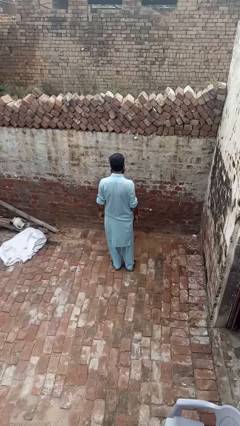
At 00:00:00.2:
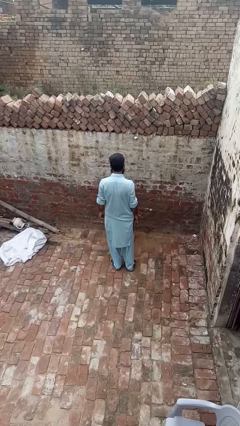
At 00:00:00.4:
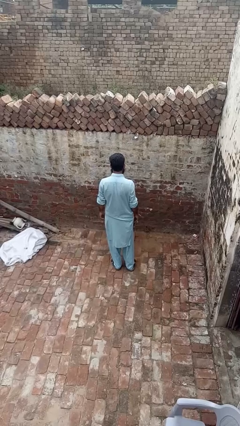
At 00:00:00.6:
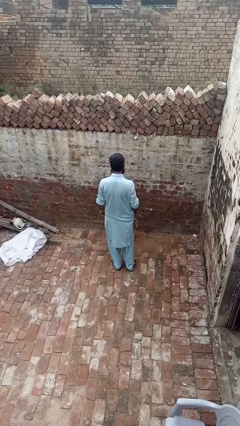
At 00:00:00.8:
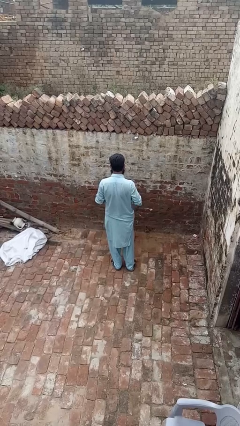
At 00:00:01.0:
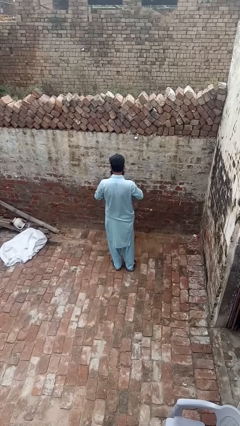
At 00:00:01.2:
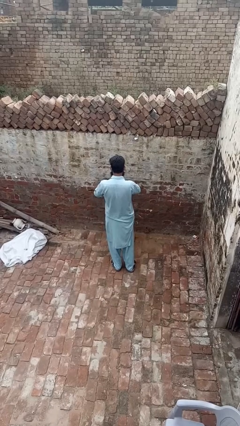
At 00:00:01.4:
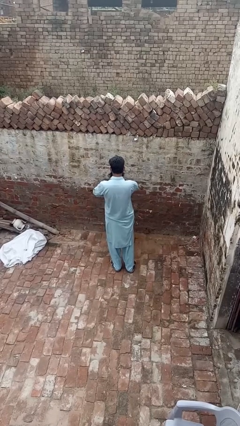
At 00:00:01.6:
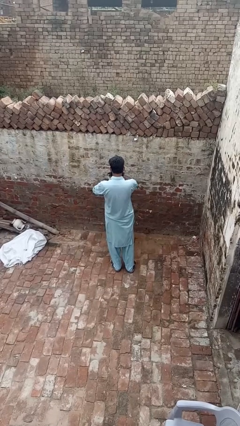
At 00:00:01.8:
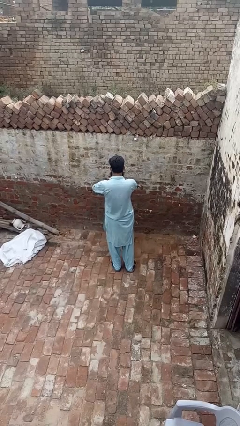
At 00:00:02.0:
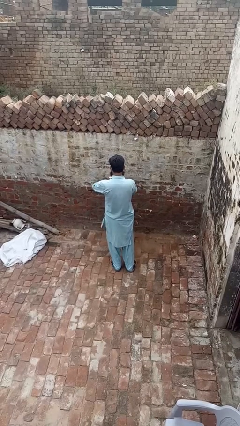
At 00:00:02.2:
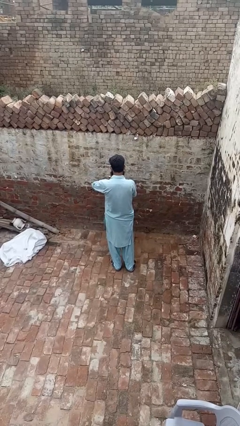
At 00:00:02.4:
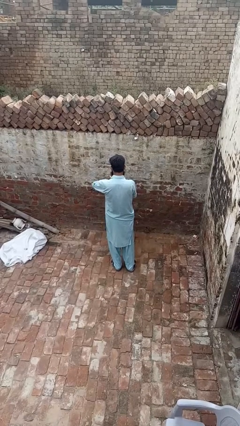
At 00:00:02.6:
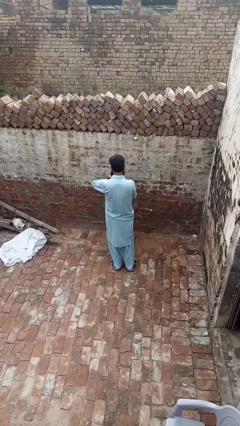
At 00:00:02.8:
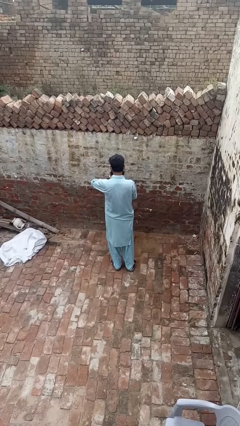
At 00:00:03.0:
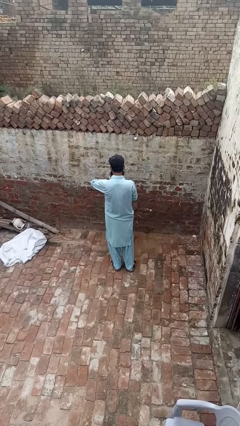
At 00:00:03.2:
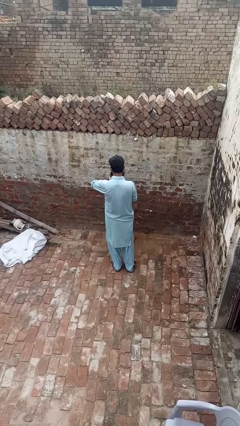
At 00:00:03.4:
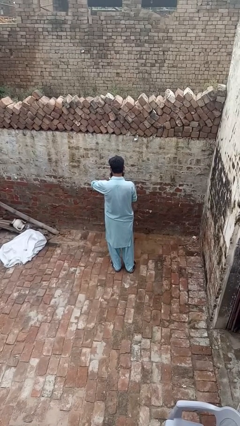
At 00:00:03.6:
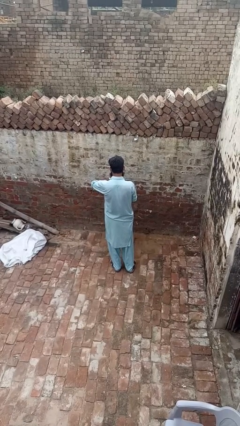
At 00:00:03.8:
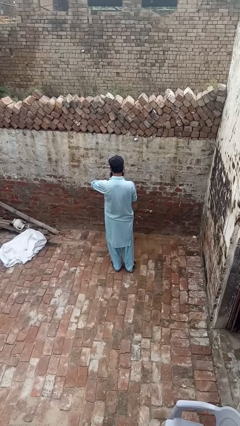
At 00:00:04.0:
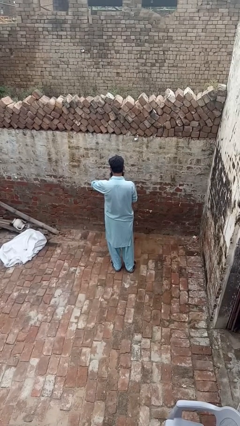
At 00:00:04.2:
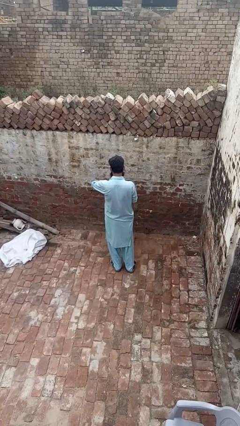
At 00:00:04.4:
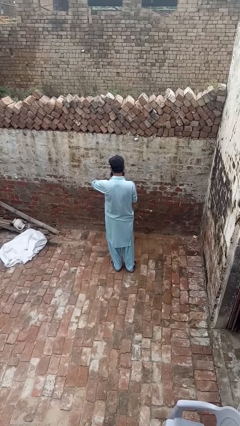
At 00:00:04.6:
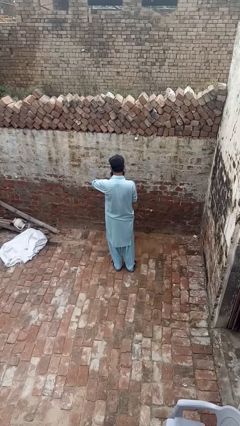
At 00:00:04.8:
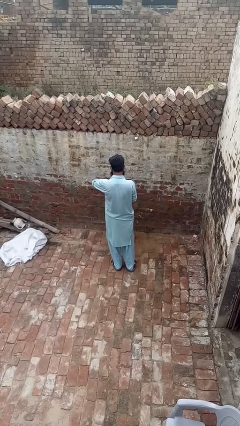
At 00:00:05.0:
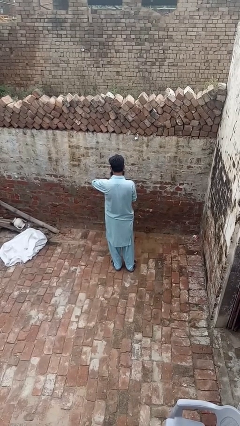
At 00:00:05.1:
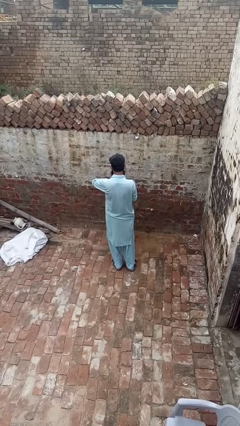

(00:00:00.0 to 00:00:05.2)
person puts on wristwatch

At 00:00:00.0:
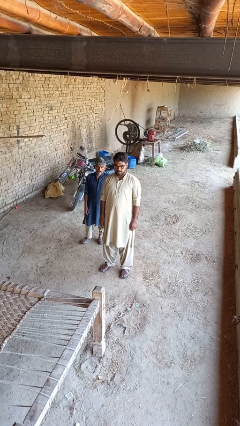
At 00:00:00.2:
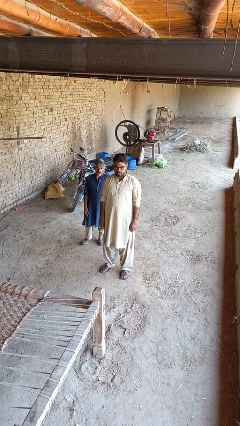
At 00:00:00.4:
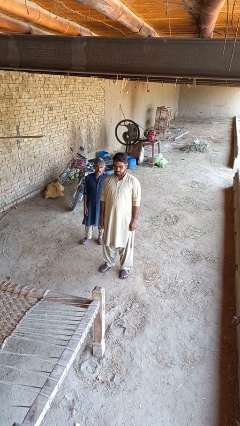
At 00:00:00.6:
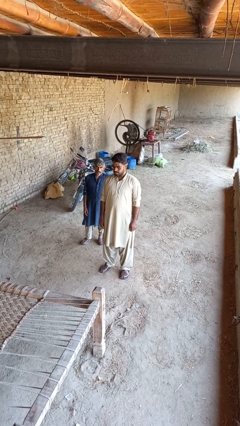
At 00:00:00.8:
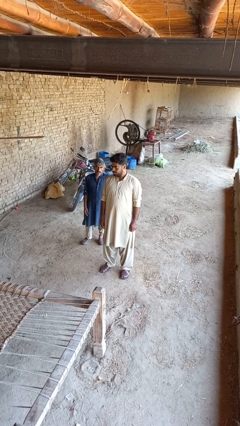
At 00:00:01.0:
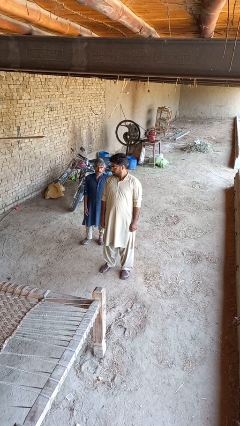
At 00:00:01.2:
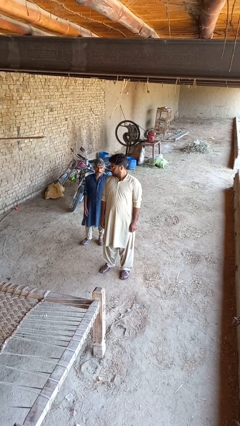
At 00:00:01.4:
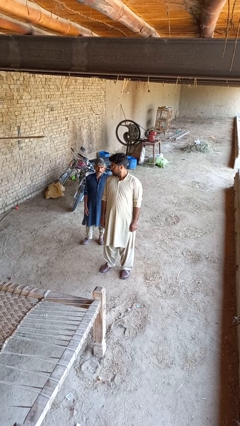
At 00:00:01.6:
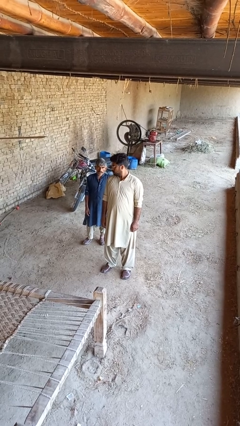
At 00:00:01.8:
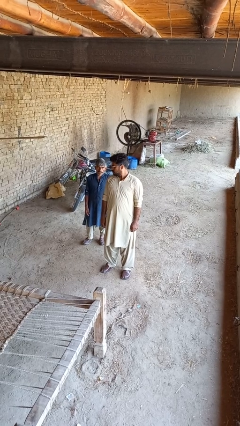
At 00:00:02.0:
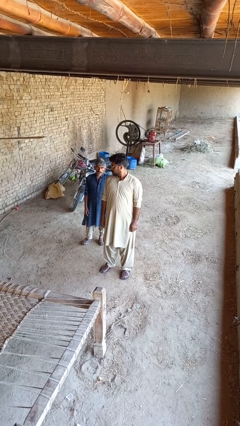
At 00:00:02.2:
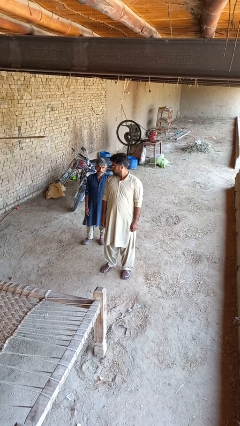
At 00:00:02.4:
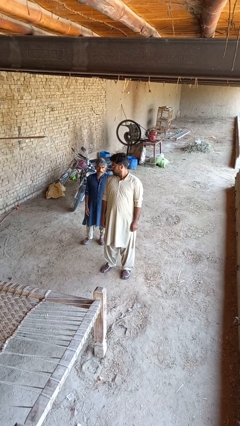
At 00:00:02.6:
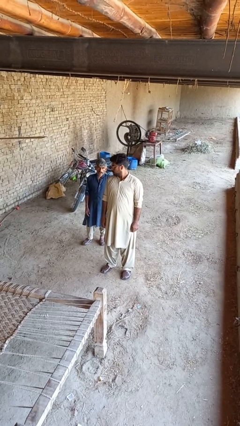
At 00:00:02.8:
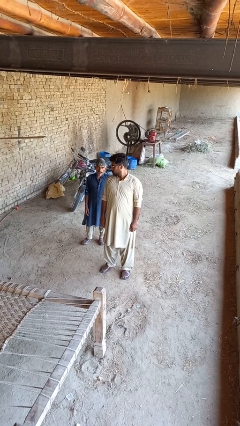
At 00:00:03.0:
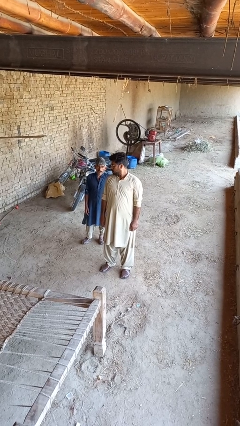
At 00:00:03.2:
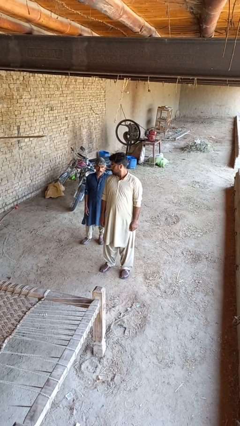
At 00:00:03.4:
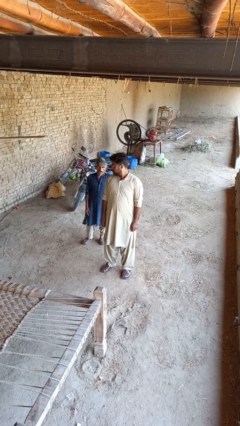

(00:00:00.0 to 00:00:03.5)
person looks over shoulder

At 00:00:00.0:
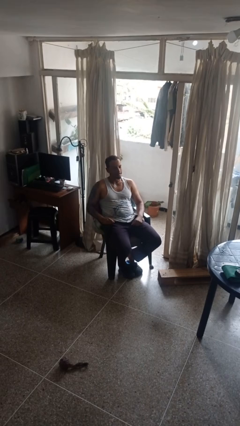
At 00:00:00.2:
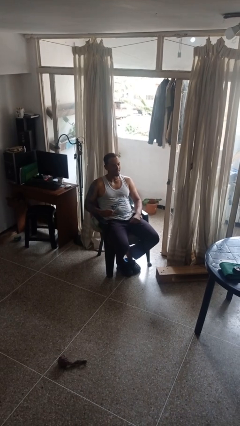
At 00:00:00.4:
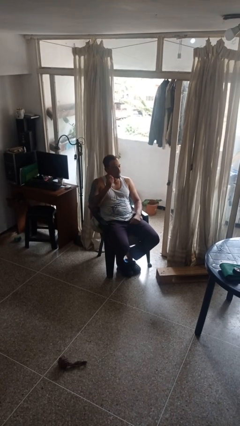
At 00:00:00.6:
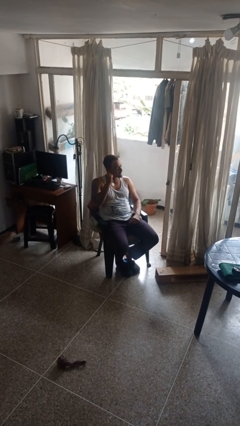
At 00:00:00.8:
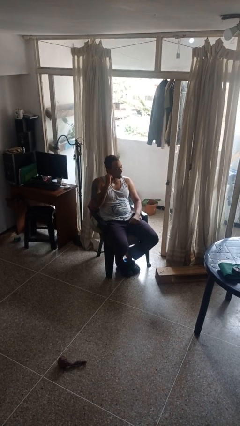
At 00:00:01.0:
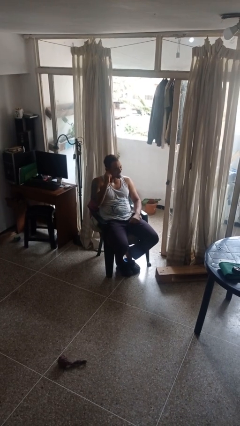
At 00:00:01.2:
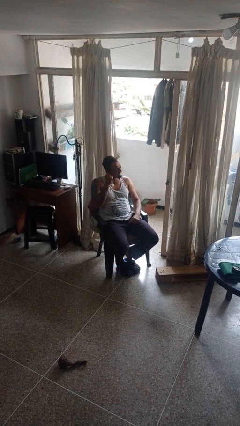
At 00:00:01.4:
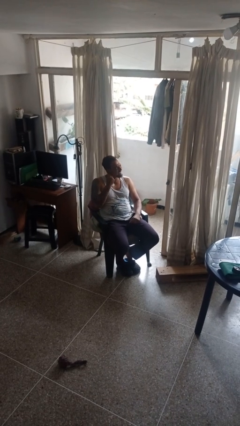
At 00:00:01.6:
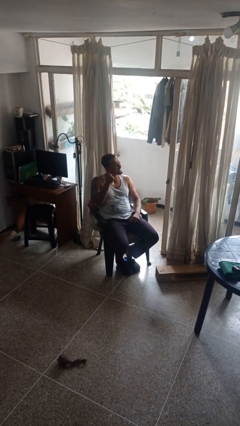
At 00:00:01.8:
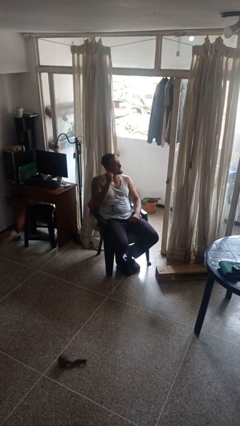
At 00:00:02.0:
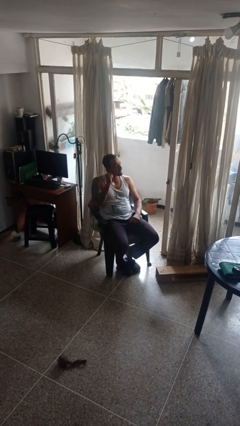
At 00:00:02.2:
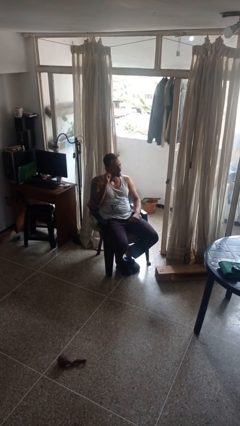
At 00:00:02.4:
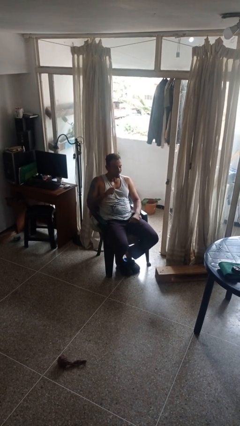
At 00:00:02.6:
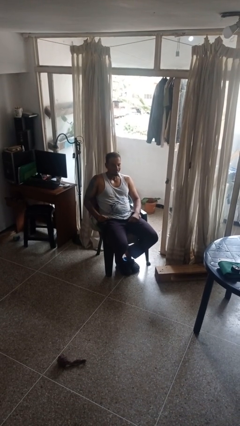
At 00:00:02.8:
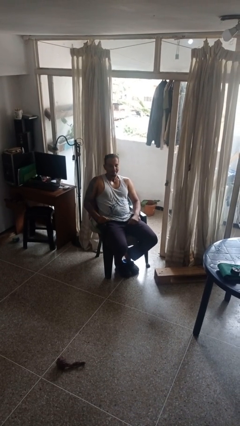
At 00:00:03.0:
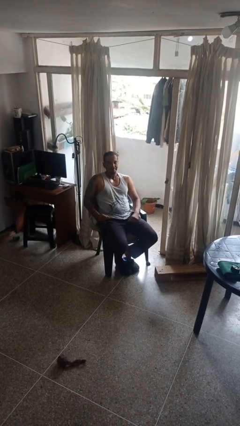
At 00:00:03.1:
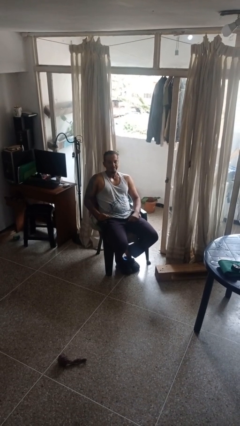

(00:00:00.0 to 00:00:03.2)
person touches earlobe

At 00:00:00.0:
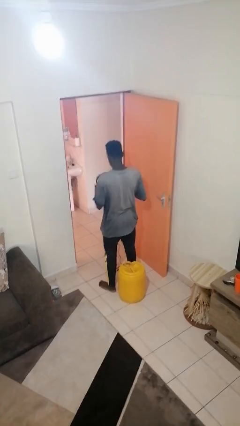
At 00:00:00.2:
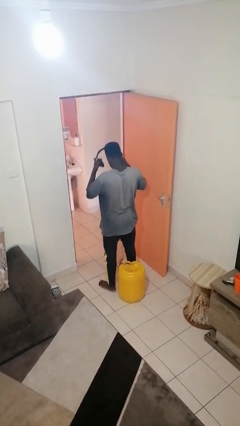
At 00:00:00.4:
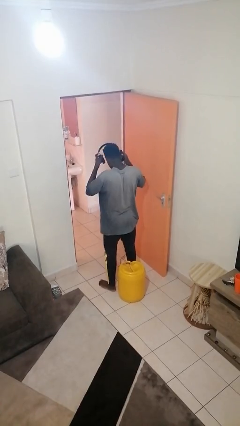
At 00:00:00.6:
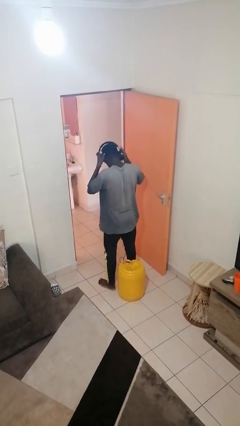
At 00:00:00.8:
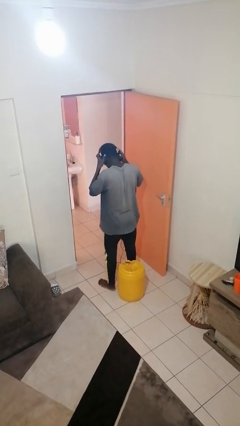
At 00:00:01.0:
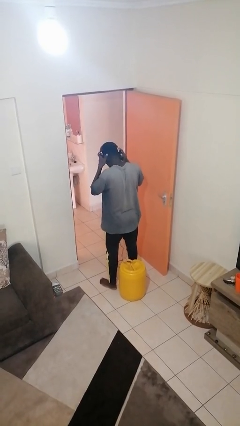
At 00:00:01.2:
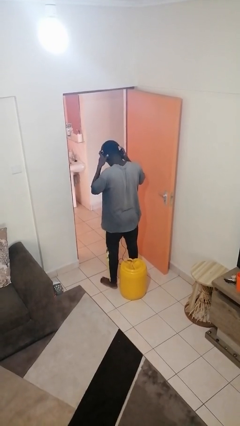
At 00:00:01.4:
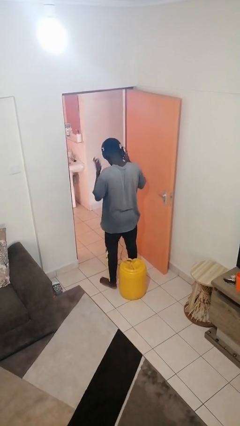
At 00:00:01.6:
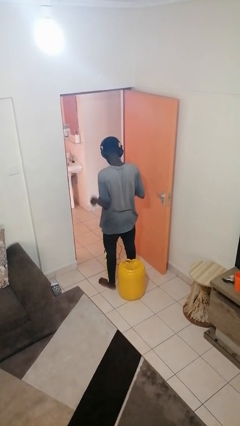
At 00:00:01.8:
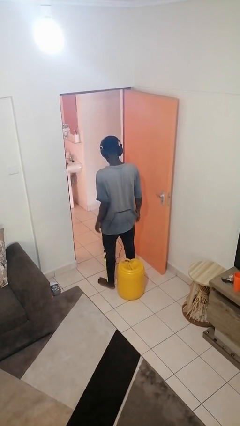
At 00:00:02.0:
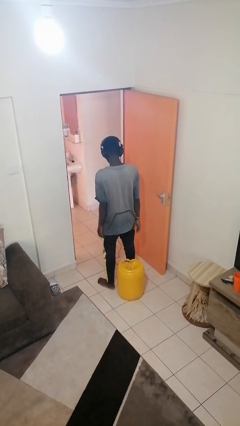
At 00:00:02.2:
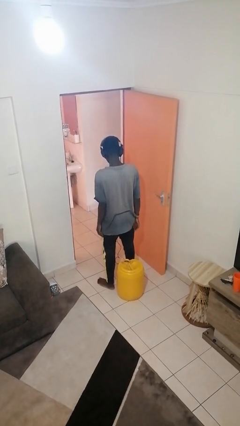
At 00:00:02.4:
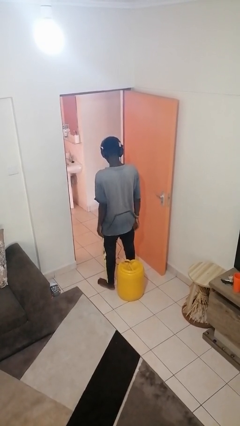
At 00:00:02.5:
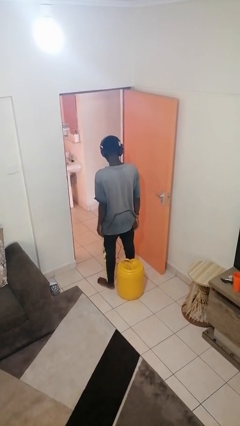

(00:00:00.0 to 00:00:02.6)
person puts on headphones

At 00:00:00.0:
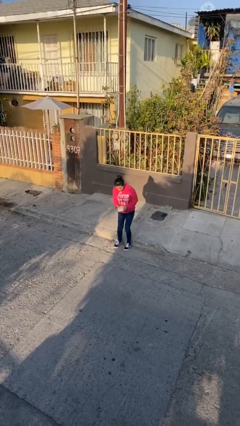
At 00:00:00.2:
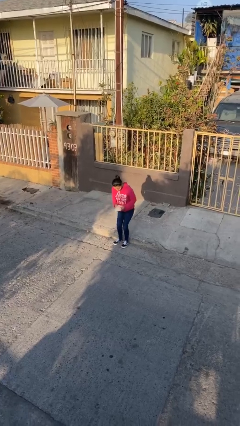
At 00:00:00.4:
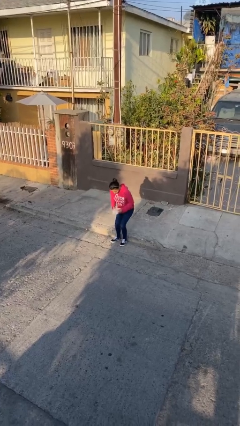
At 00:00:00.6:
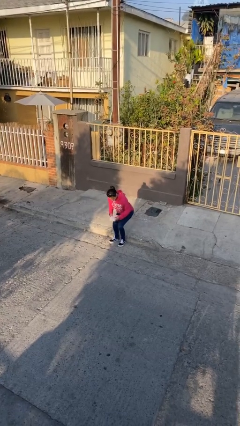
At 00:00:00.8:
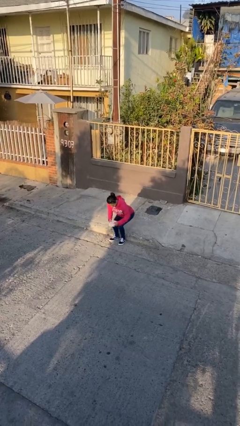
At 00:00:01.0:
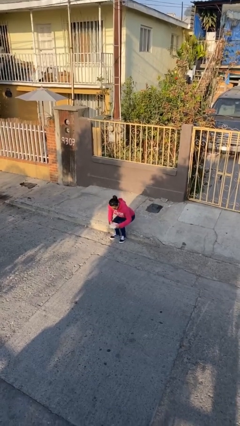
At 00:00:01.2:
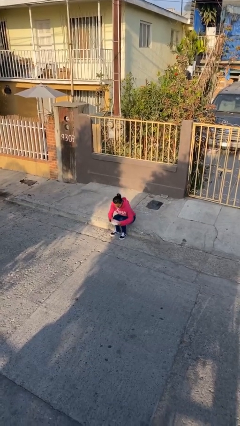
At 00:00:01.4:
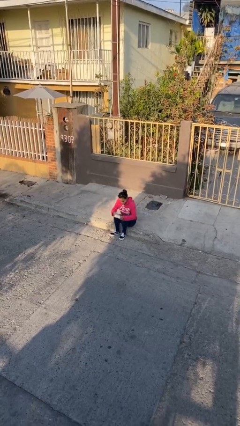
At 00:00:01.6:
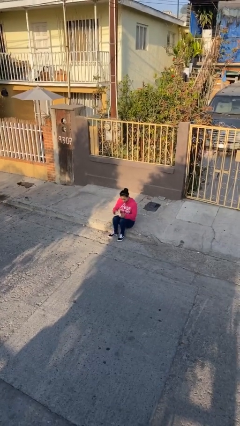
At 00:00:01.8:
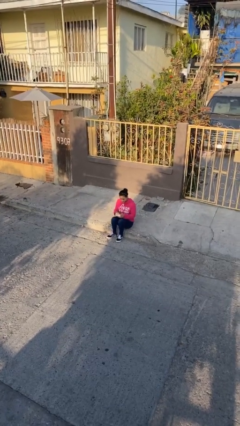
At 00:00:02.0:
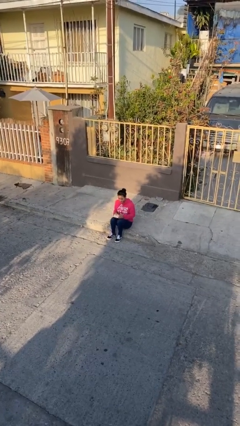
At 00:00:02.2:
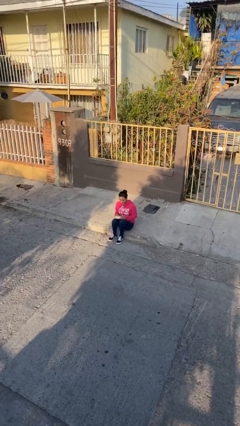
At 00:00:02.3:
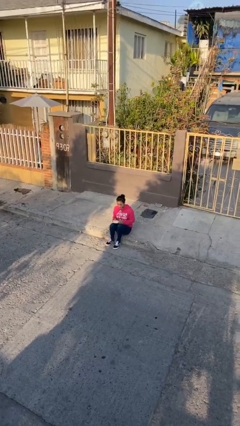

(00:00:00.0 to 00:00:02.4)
person sits down

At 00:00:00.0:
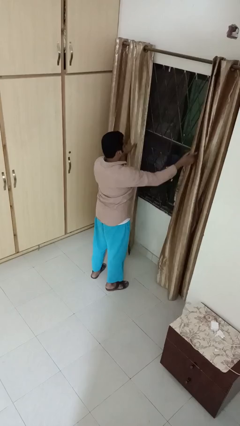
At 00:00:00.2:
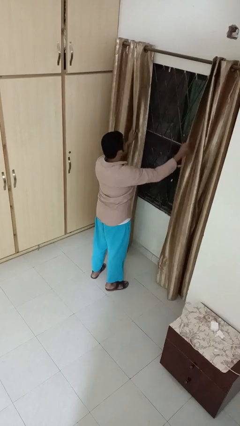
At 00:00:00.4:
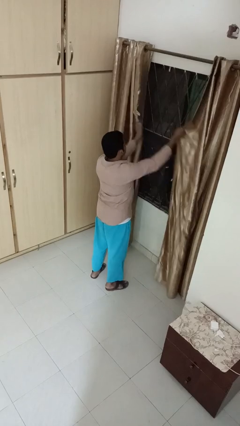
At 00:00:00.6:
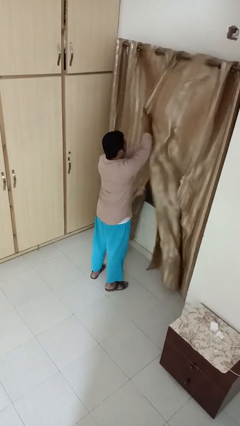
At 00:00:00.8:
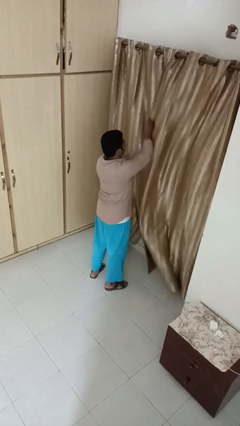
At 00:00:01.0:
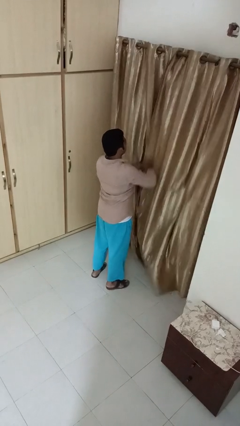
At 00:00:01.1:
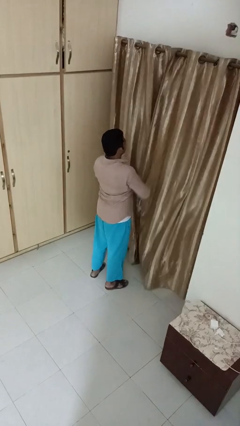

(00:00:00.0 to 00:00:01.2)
person closes curtains
